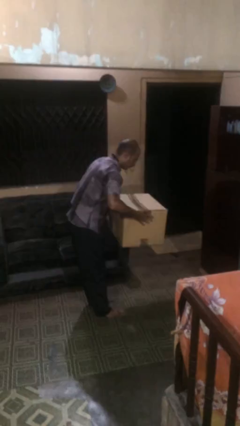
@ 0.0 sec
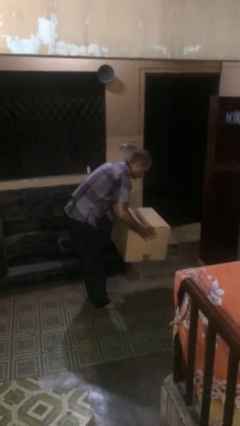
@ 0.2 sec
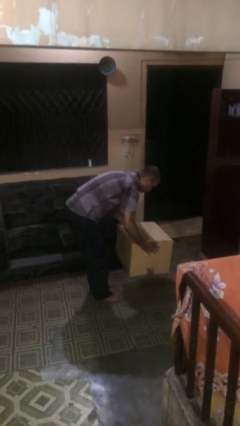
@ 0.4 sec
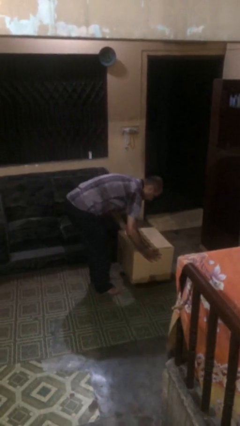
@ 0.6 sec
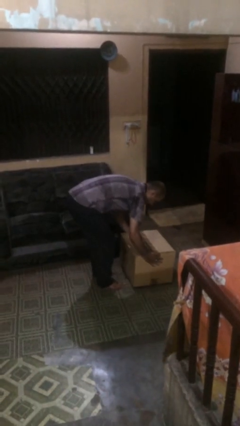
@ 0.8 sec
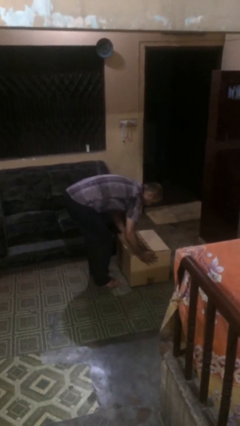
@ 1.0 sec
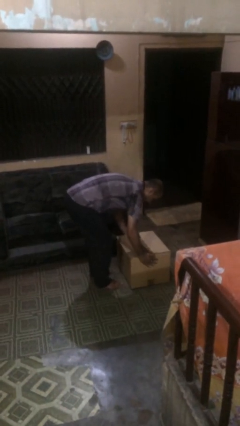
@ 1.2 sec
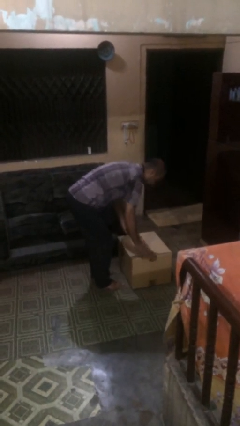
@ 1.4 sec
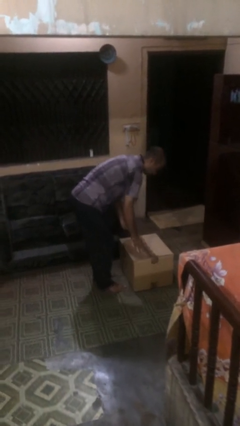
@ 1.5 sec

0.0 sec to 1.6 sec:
person puts down object on floor

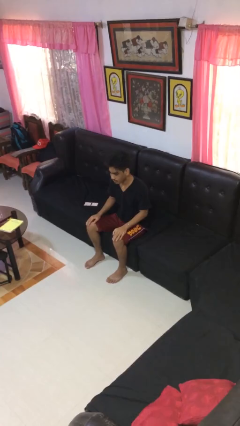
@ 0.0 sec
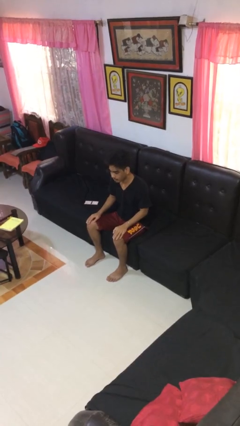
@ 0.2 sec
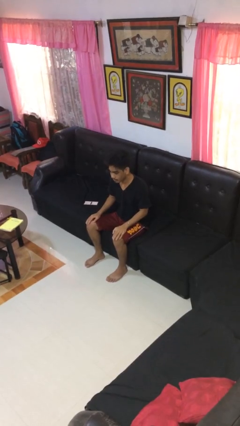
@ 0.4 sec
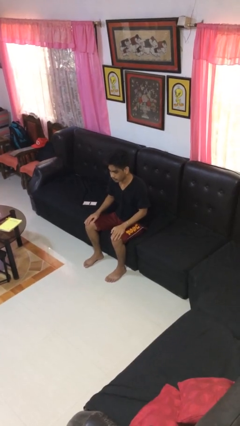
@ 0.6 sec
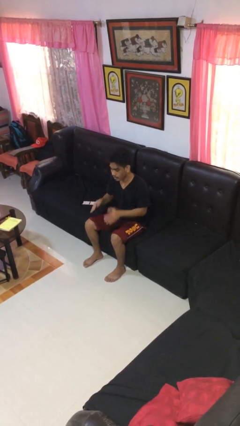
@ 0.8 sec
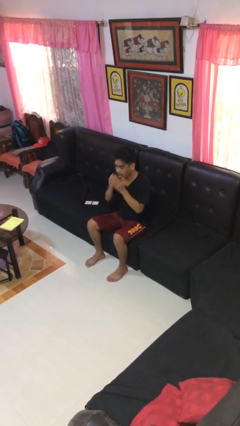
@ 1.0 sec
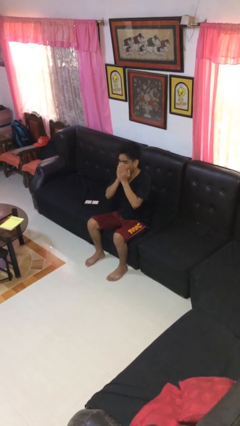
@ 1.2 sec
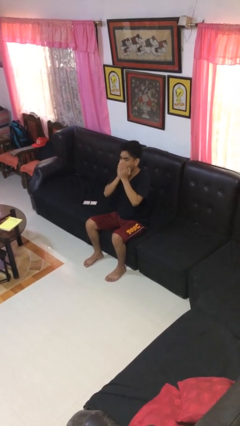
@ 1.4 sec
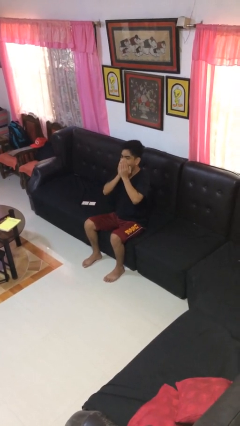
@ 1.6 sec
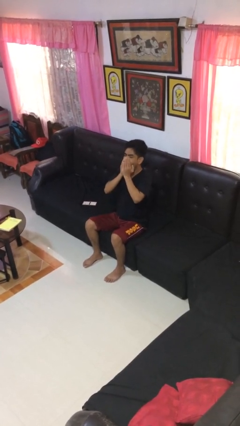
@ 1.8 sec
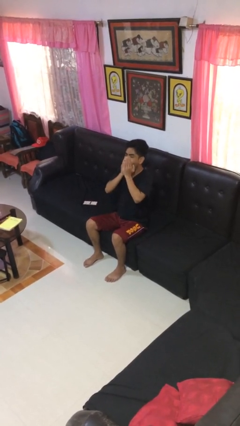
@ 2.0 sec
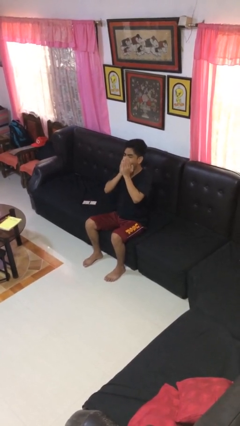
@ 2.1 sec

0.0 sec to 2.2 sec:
person yawns

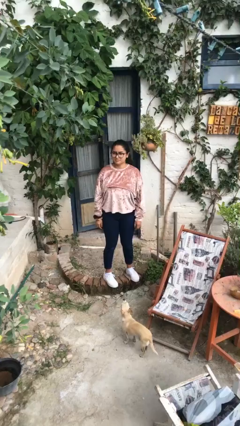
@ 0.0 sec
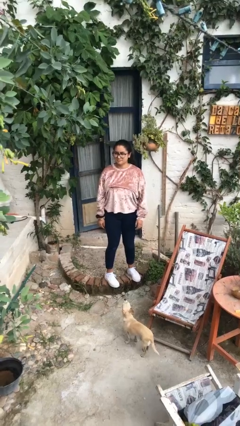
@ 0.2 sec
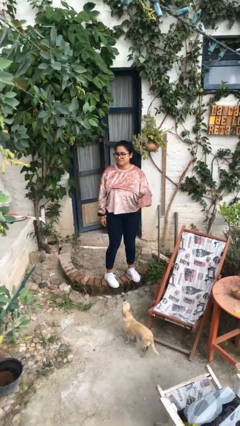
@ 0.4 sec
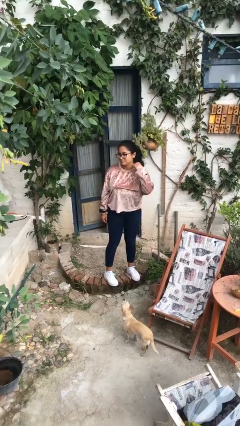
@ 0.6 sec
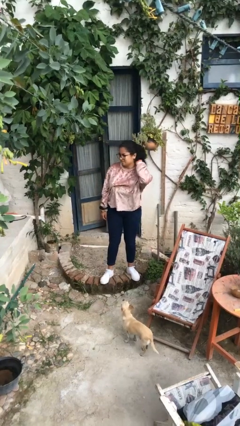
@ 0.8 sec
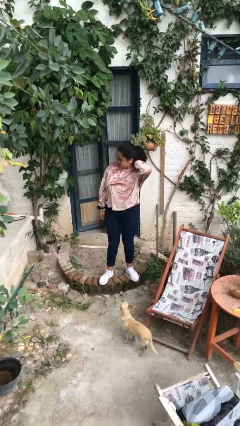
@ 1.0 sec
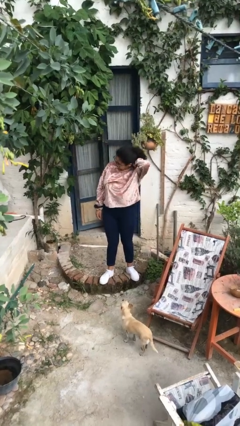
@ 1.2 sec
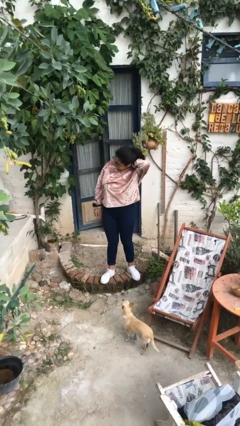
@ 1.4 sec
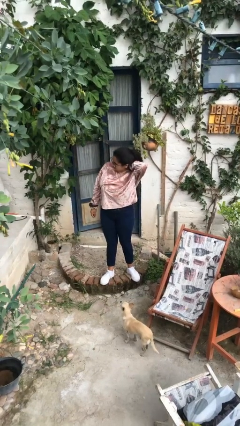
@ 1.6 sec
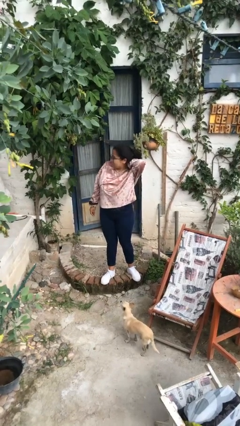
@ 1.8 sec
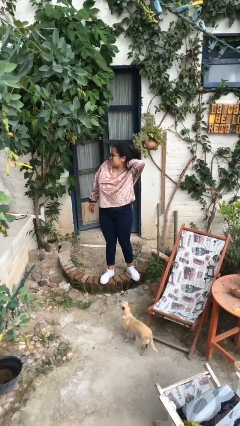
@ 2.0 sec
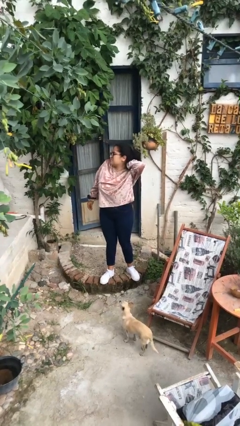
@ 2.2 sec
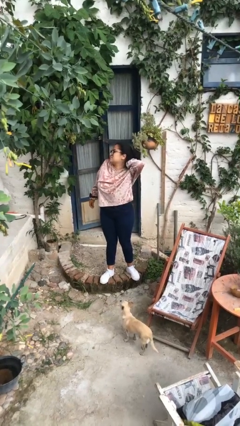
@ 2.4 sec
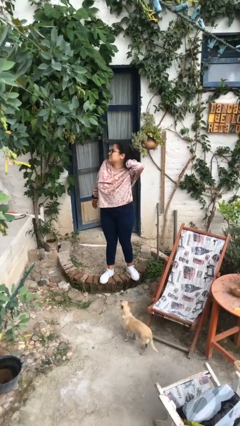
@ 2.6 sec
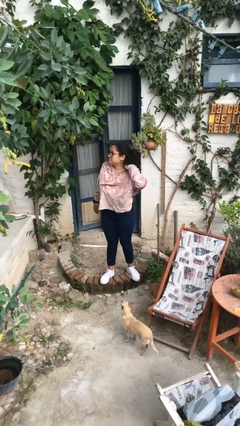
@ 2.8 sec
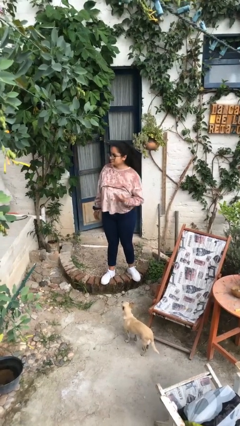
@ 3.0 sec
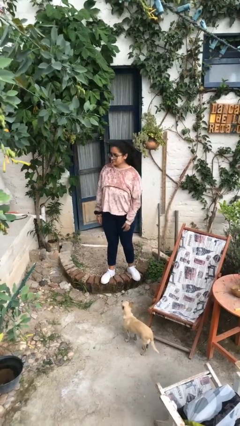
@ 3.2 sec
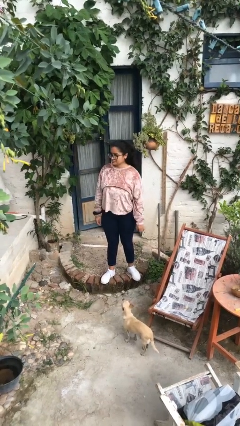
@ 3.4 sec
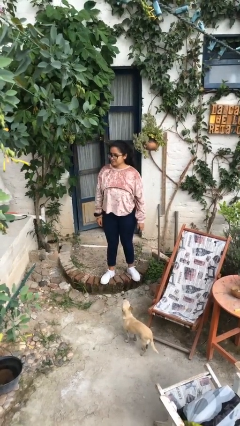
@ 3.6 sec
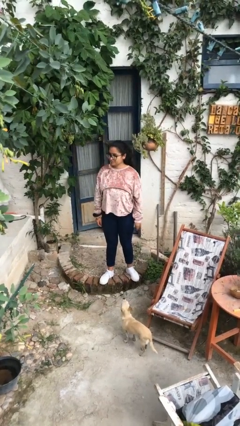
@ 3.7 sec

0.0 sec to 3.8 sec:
person rubs neck

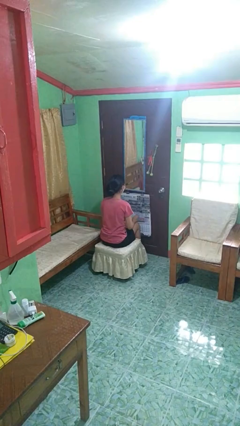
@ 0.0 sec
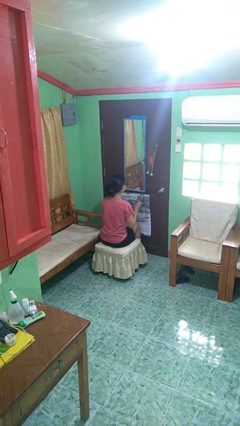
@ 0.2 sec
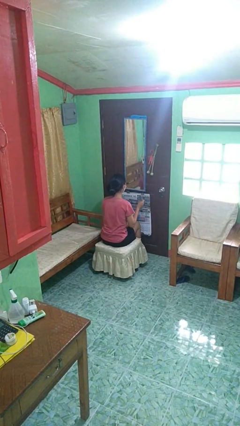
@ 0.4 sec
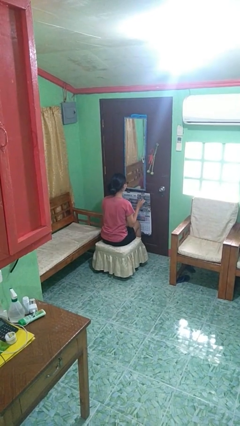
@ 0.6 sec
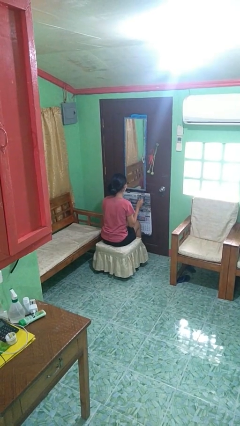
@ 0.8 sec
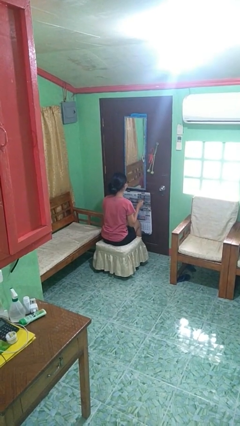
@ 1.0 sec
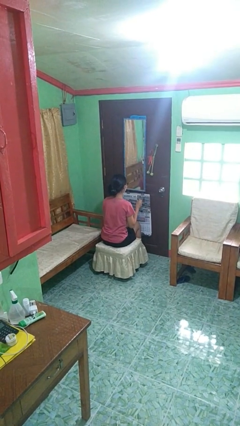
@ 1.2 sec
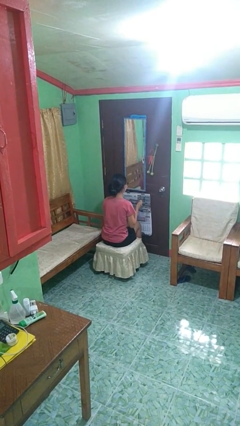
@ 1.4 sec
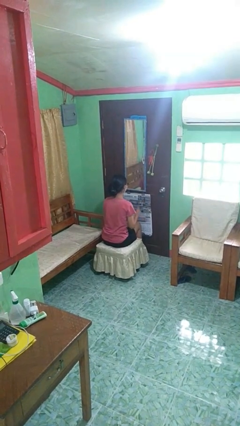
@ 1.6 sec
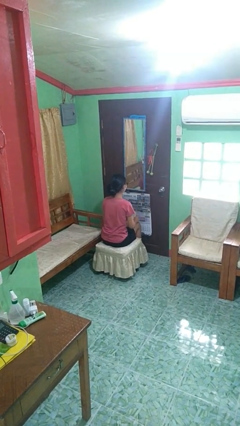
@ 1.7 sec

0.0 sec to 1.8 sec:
person snaps fingers

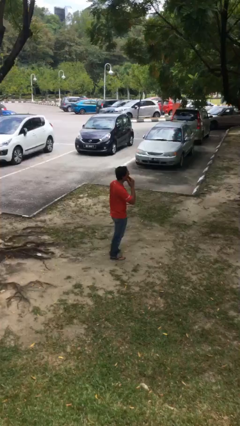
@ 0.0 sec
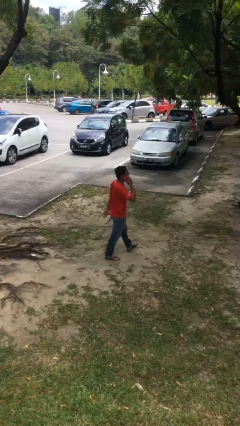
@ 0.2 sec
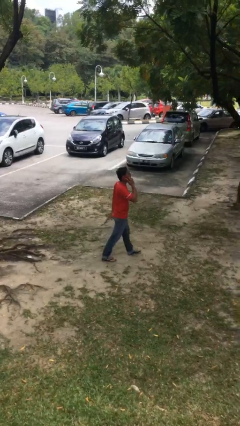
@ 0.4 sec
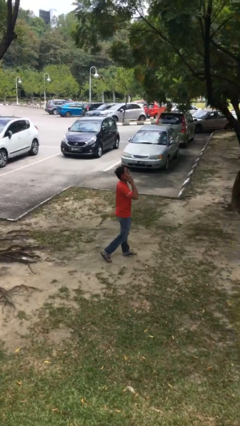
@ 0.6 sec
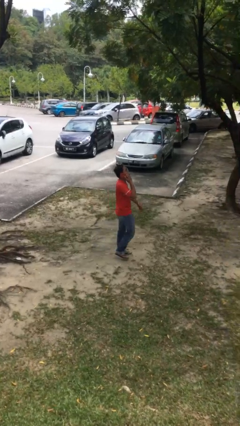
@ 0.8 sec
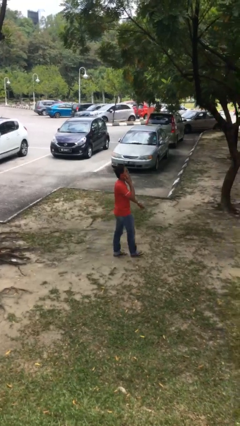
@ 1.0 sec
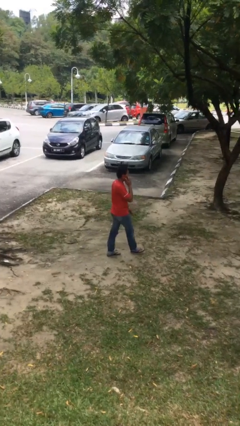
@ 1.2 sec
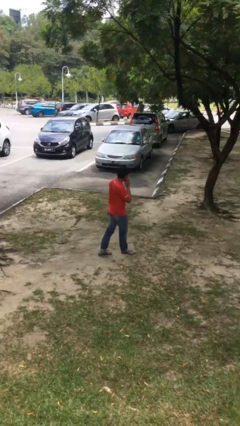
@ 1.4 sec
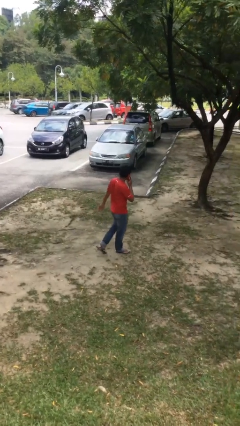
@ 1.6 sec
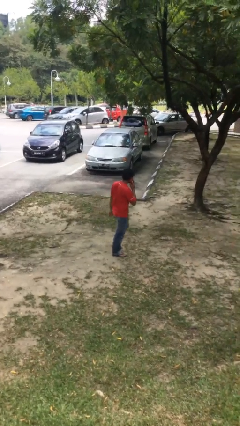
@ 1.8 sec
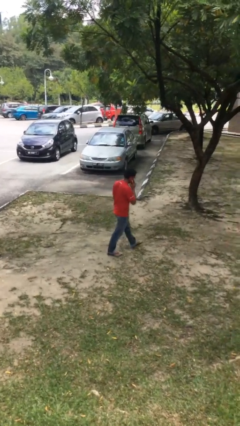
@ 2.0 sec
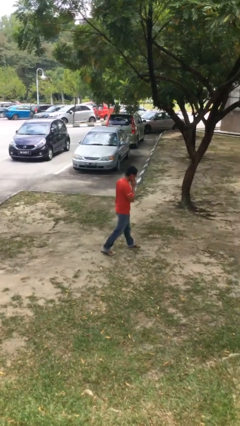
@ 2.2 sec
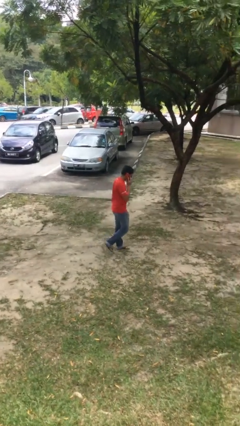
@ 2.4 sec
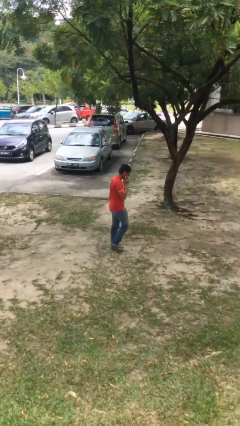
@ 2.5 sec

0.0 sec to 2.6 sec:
person talks on phone

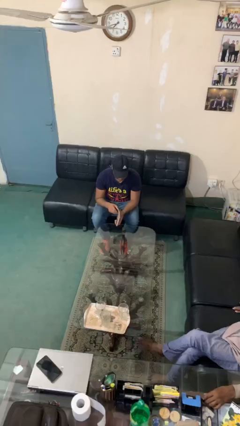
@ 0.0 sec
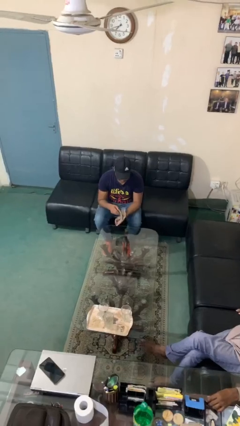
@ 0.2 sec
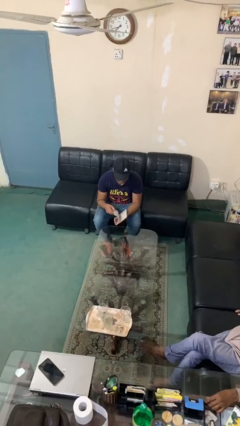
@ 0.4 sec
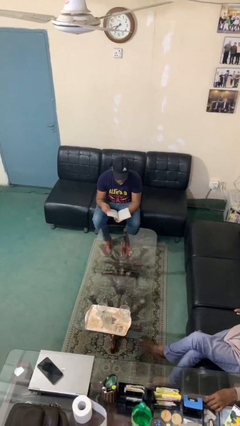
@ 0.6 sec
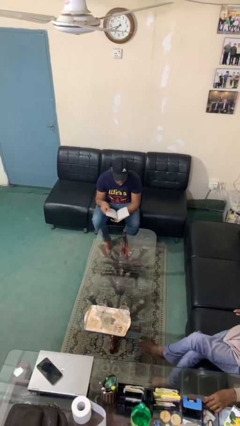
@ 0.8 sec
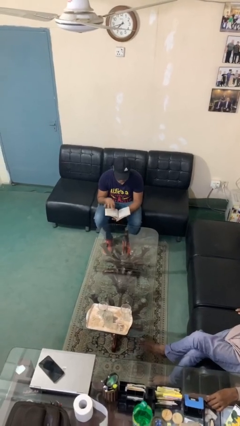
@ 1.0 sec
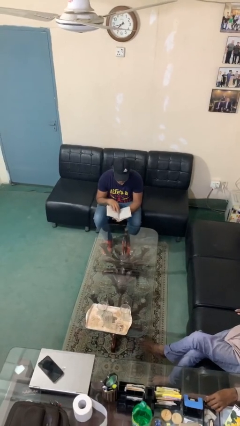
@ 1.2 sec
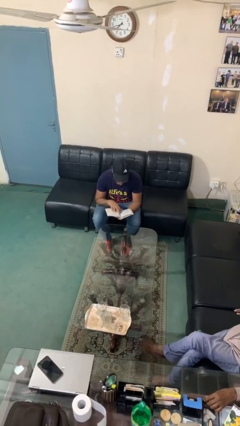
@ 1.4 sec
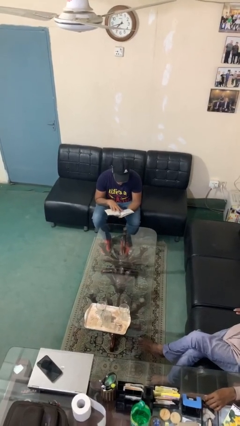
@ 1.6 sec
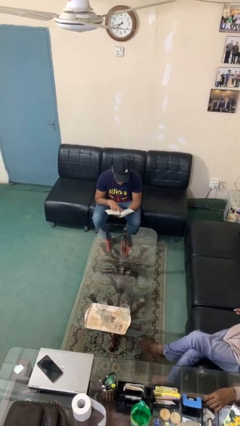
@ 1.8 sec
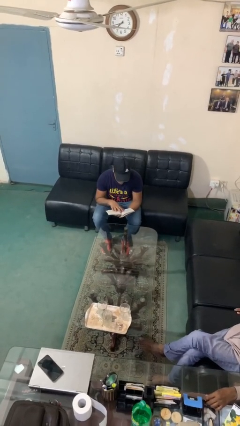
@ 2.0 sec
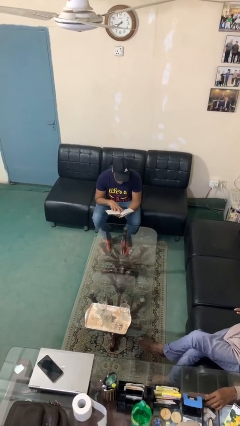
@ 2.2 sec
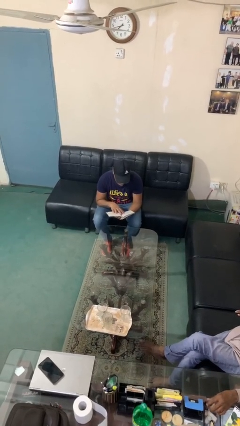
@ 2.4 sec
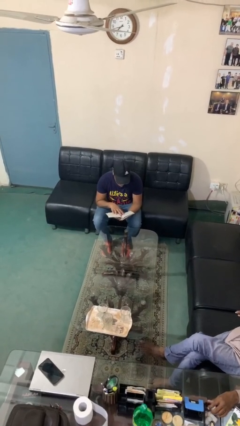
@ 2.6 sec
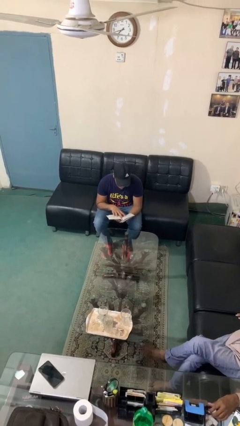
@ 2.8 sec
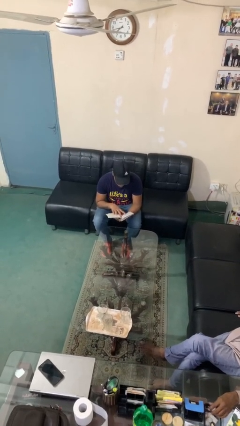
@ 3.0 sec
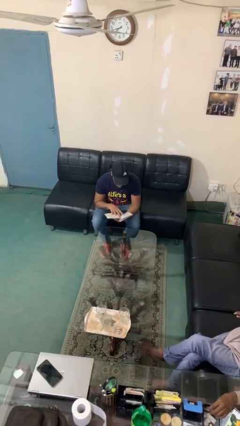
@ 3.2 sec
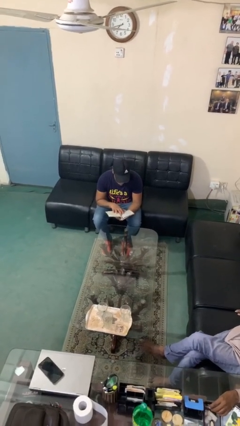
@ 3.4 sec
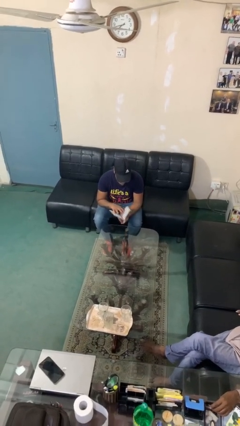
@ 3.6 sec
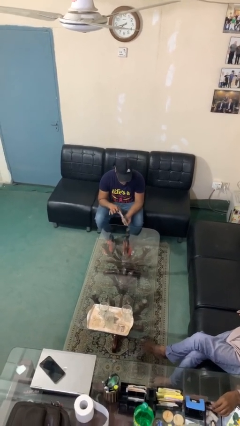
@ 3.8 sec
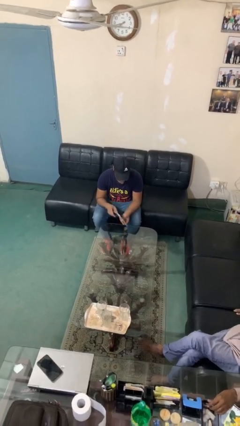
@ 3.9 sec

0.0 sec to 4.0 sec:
person reads document

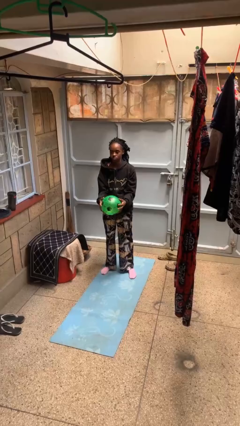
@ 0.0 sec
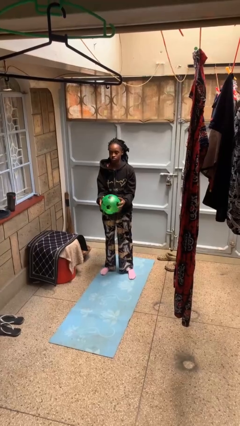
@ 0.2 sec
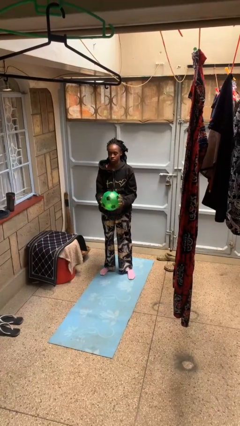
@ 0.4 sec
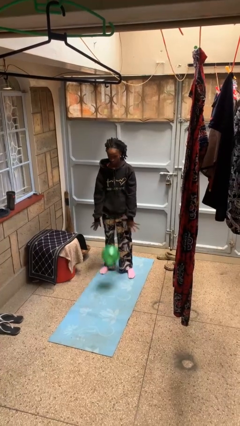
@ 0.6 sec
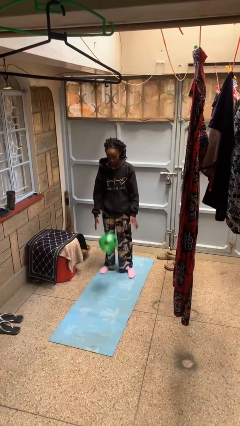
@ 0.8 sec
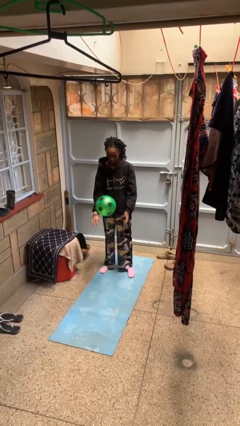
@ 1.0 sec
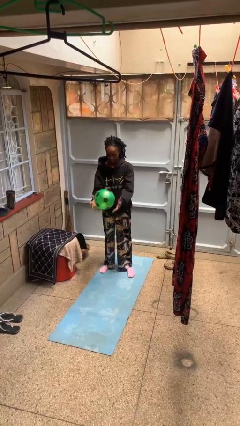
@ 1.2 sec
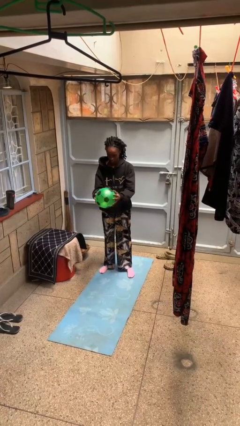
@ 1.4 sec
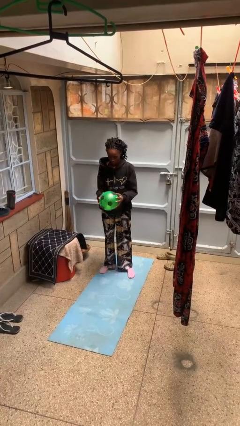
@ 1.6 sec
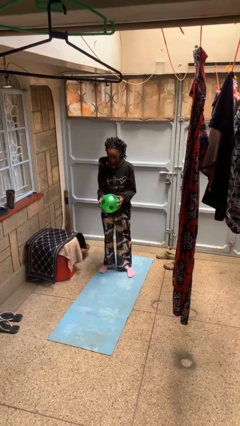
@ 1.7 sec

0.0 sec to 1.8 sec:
person bounces ball on floor
